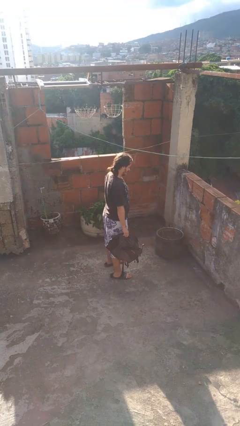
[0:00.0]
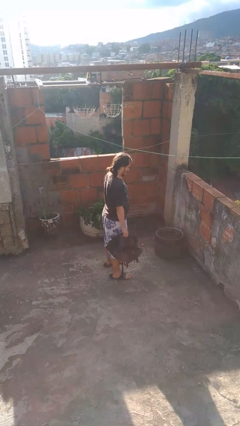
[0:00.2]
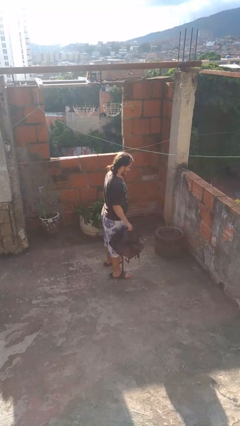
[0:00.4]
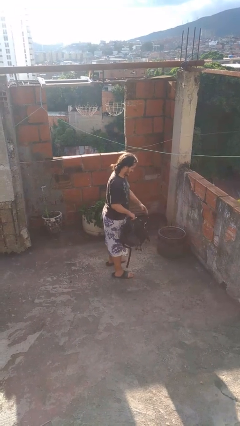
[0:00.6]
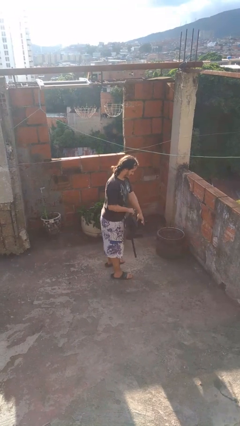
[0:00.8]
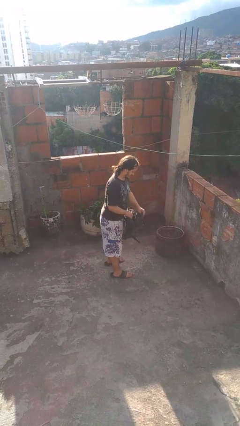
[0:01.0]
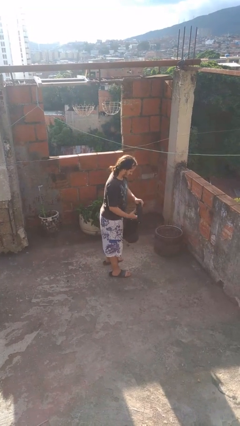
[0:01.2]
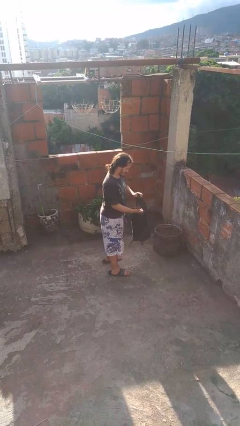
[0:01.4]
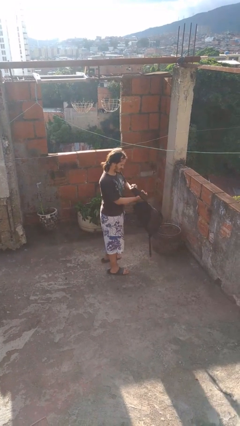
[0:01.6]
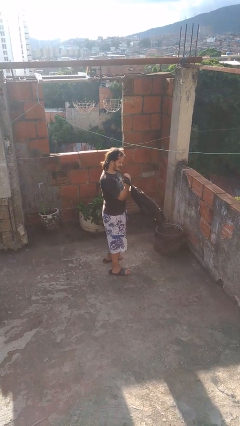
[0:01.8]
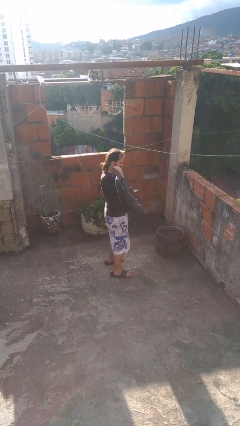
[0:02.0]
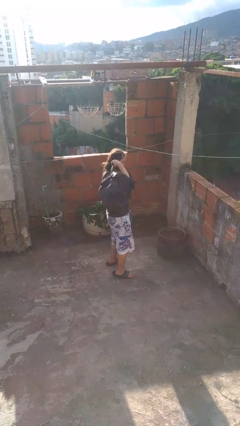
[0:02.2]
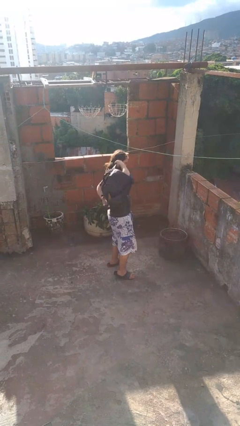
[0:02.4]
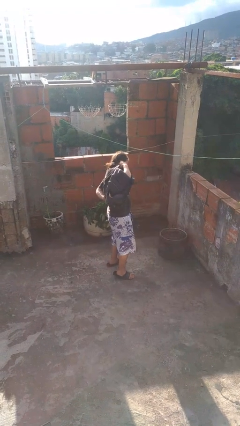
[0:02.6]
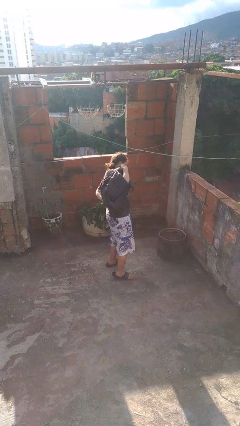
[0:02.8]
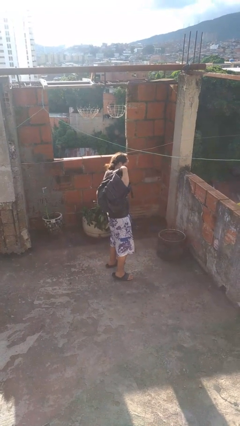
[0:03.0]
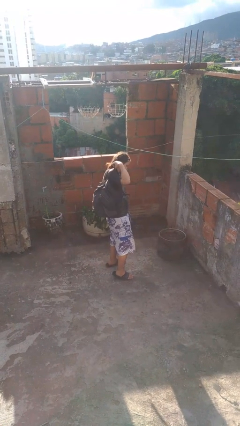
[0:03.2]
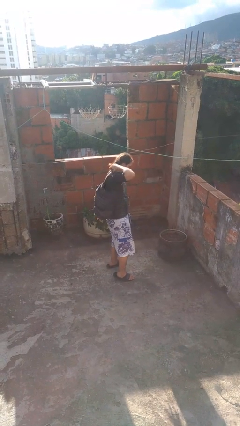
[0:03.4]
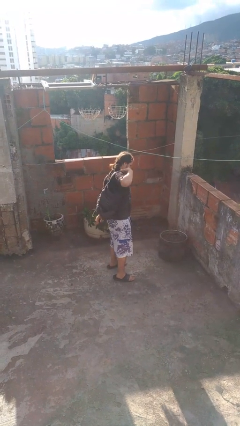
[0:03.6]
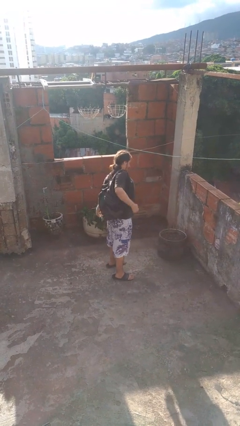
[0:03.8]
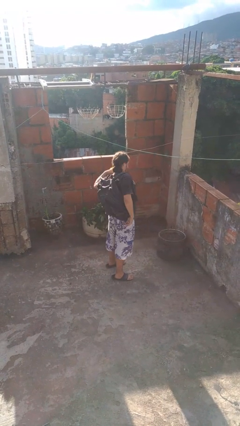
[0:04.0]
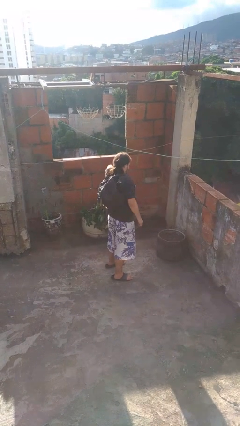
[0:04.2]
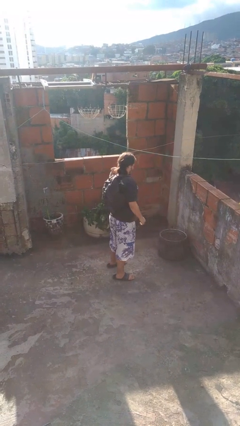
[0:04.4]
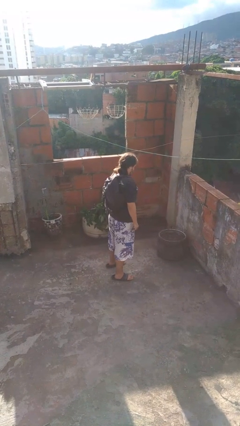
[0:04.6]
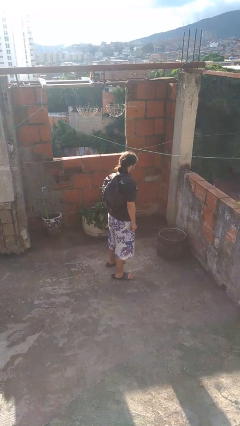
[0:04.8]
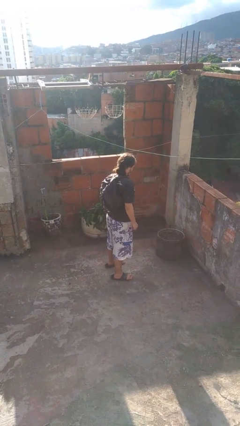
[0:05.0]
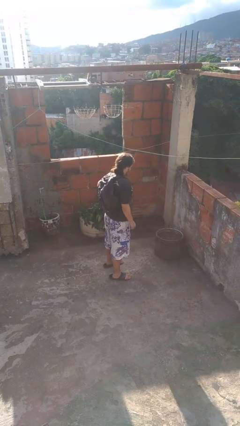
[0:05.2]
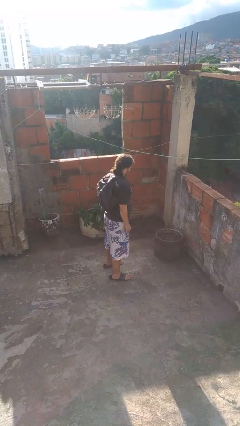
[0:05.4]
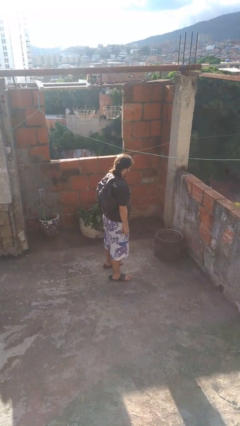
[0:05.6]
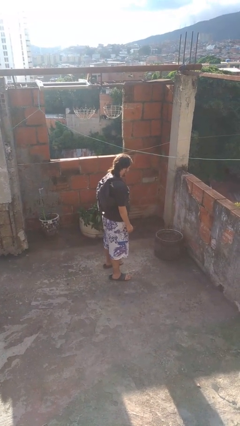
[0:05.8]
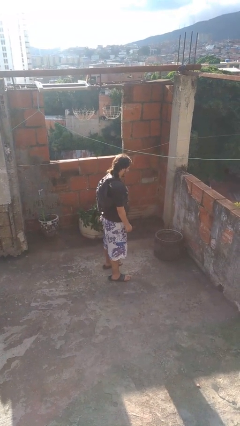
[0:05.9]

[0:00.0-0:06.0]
person puts on backpack

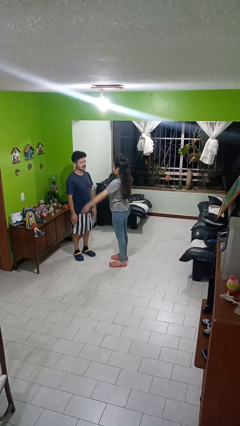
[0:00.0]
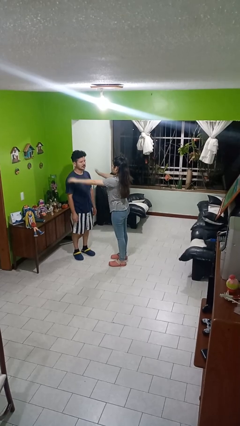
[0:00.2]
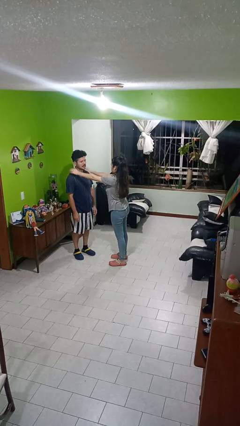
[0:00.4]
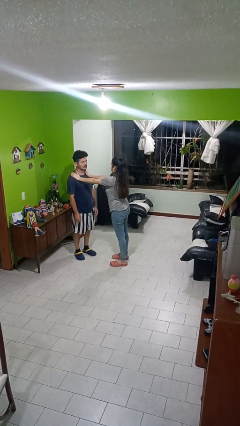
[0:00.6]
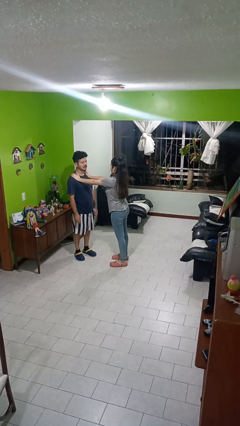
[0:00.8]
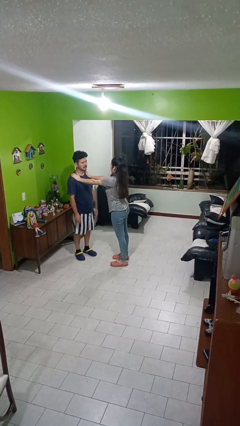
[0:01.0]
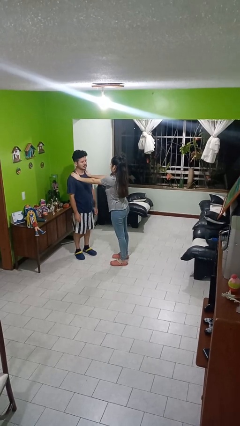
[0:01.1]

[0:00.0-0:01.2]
person grabs person by shoulder

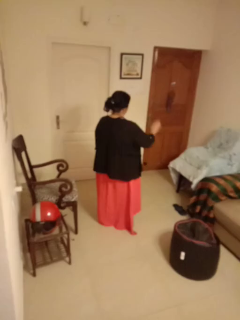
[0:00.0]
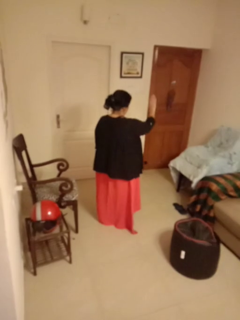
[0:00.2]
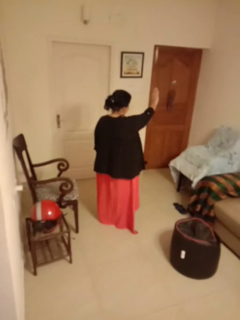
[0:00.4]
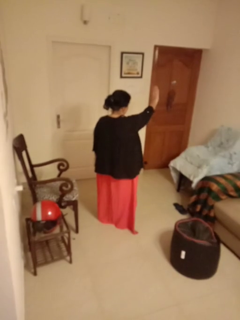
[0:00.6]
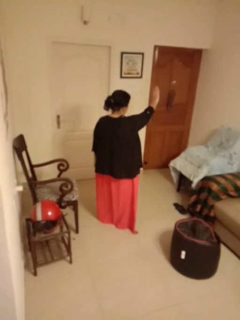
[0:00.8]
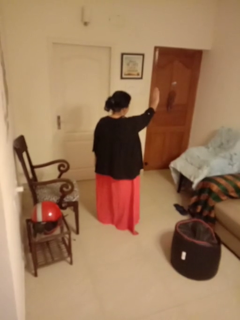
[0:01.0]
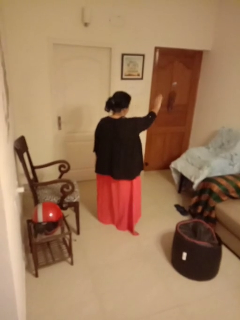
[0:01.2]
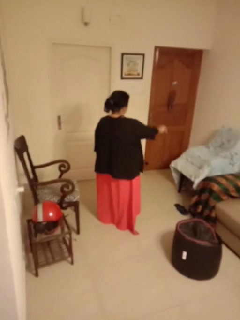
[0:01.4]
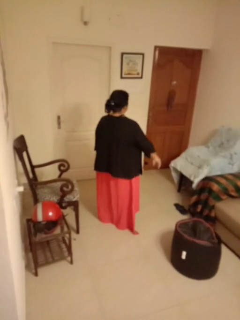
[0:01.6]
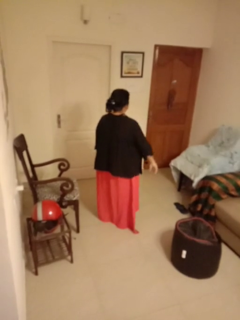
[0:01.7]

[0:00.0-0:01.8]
person gestures stop

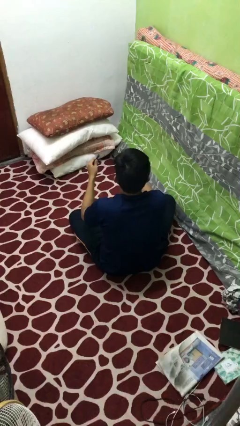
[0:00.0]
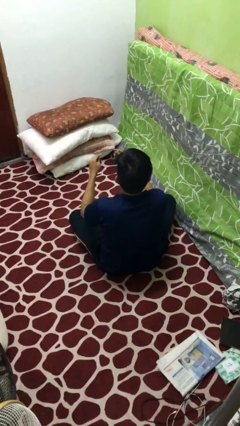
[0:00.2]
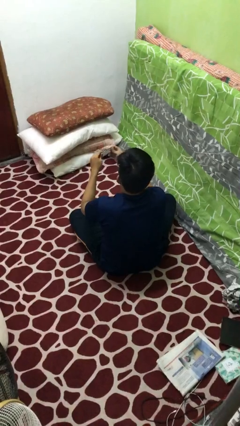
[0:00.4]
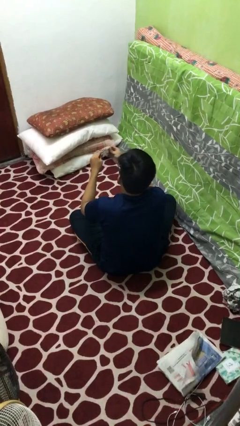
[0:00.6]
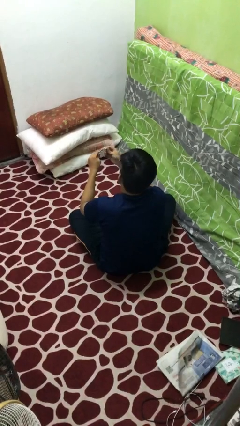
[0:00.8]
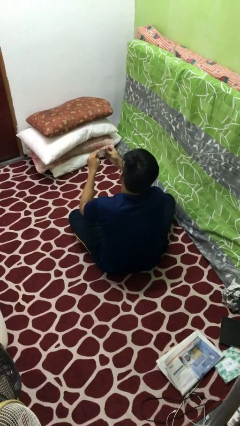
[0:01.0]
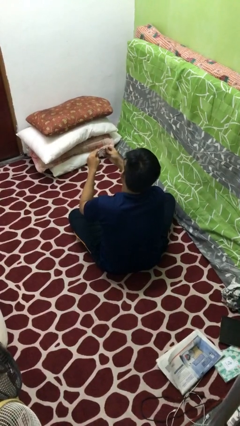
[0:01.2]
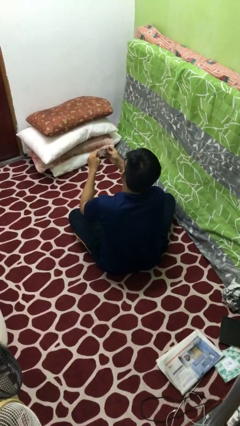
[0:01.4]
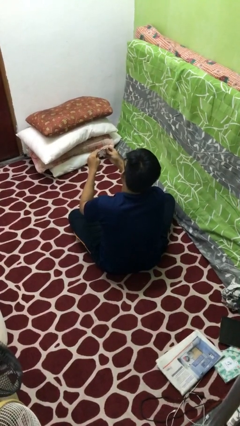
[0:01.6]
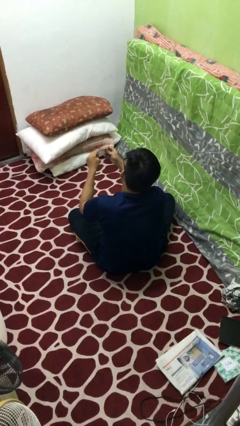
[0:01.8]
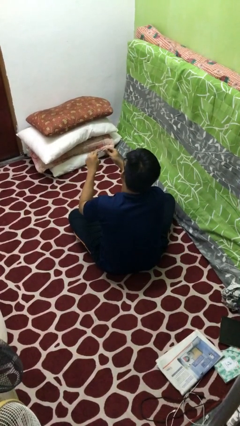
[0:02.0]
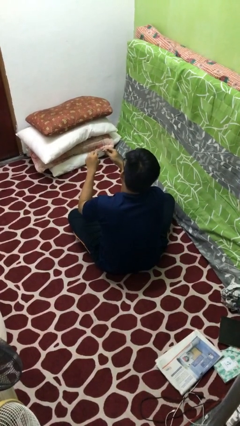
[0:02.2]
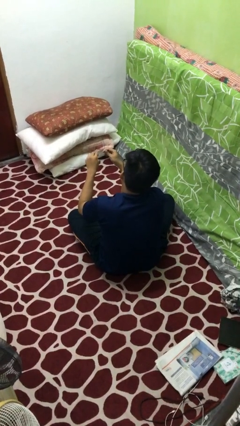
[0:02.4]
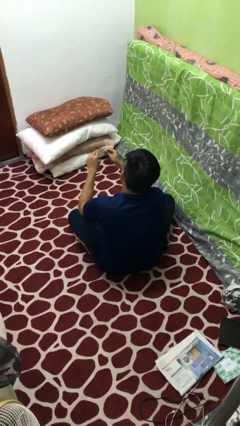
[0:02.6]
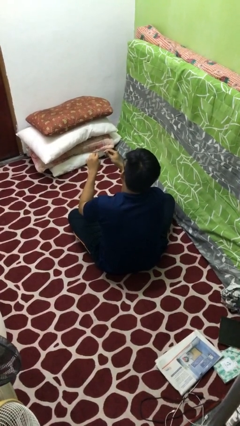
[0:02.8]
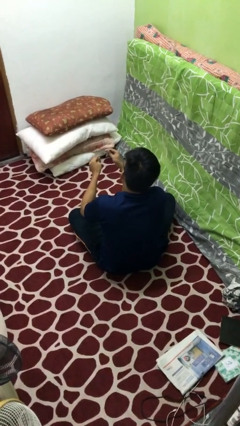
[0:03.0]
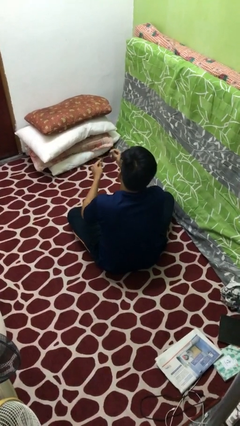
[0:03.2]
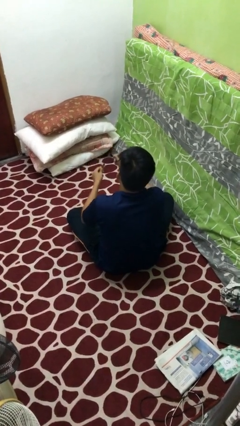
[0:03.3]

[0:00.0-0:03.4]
person clips fingernails

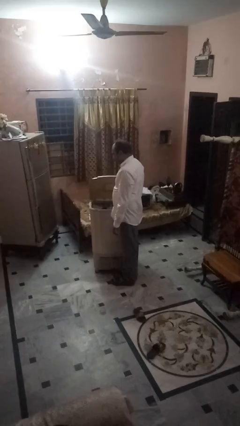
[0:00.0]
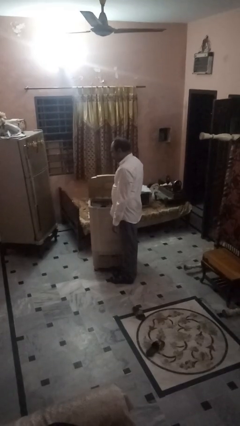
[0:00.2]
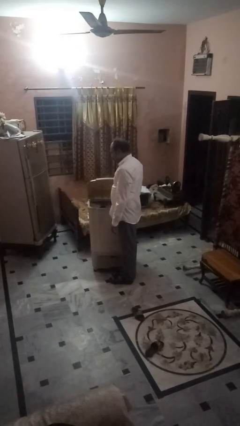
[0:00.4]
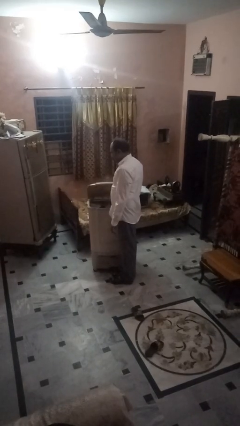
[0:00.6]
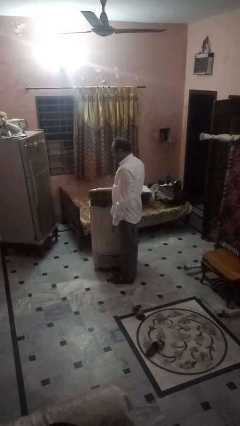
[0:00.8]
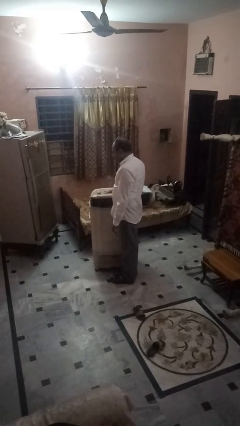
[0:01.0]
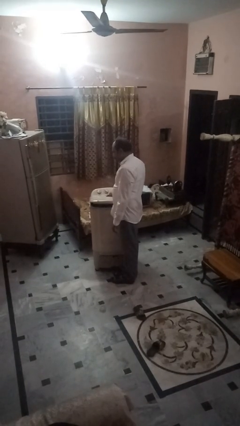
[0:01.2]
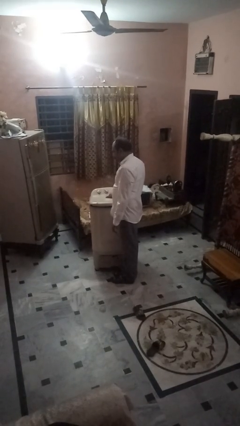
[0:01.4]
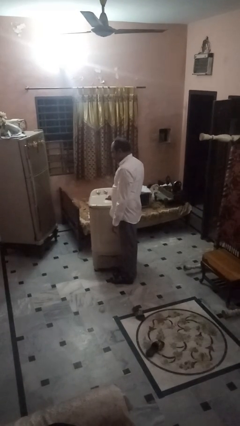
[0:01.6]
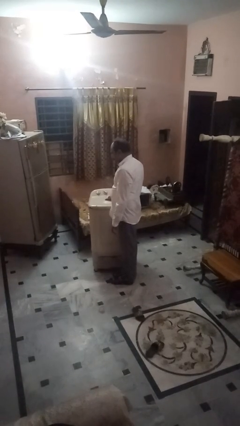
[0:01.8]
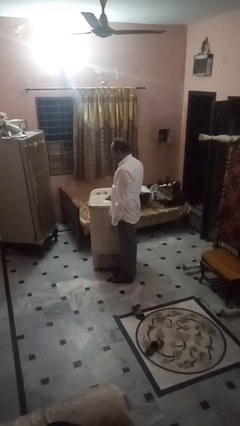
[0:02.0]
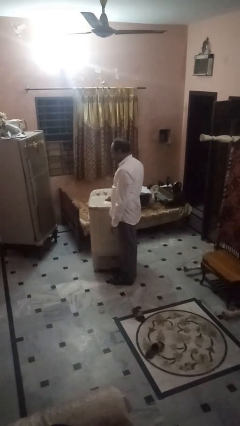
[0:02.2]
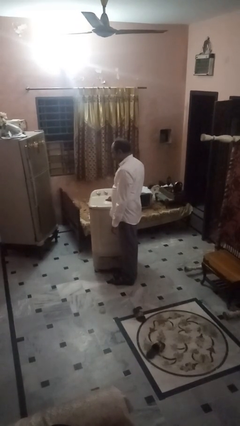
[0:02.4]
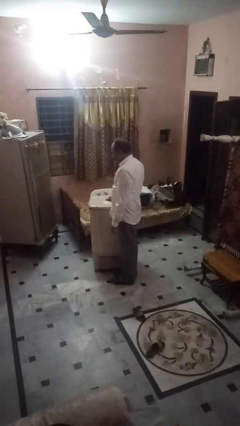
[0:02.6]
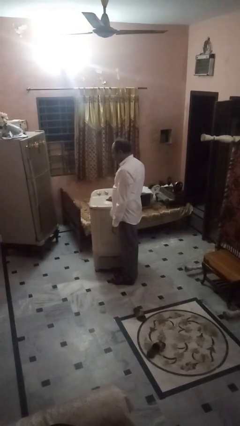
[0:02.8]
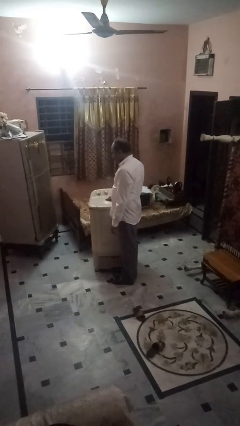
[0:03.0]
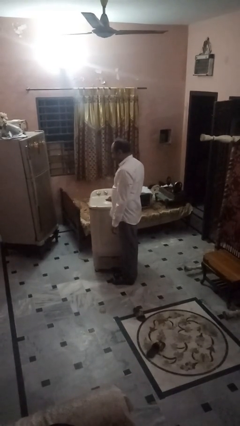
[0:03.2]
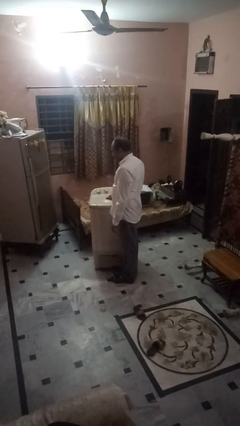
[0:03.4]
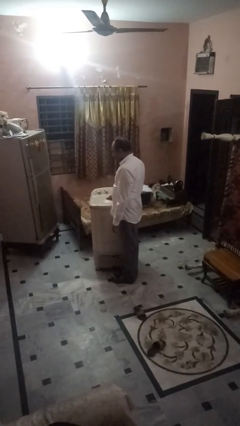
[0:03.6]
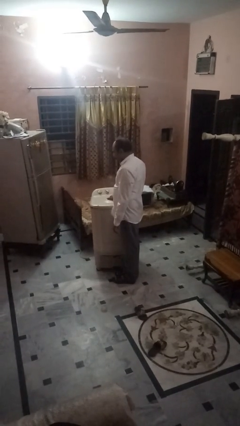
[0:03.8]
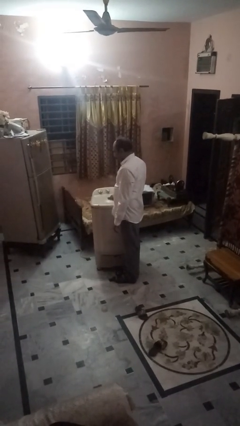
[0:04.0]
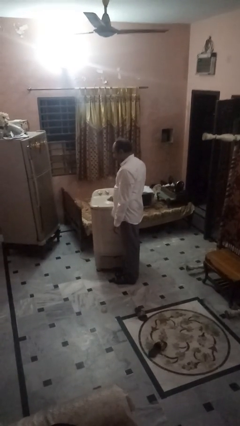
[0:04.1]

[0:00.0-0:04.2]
person closes clothes washer

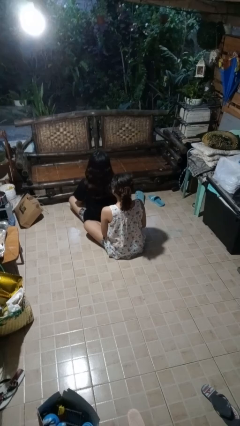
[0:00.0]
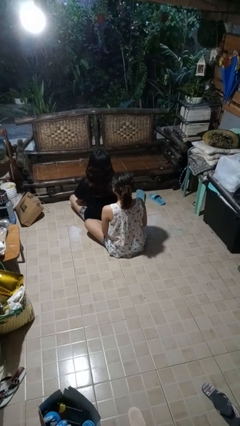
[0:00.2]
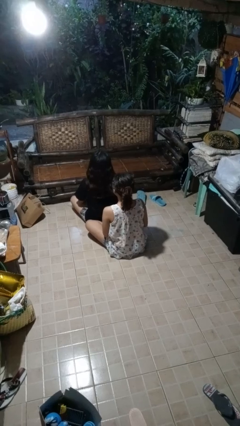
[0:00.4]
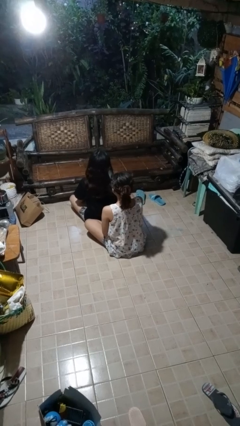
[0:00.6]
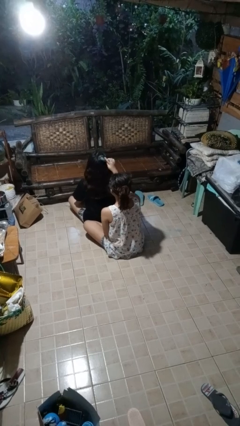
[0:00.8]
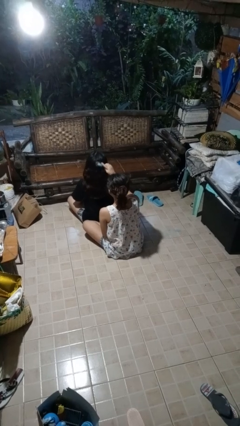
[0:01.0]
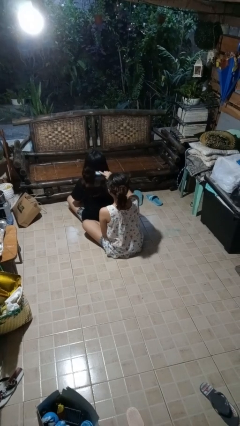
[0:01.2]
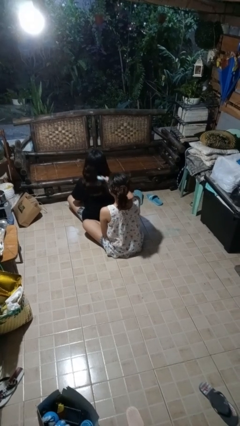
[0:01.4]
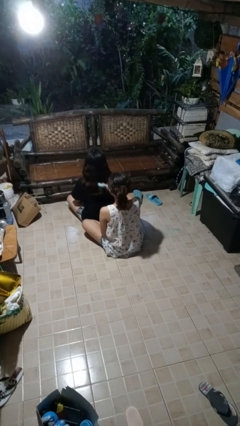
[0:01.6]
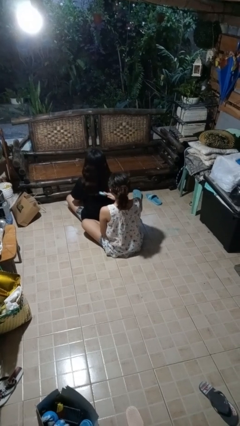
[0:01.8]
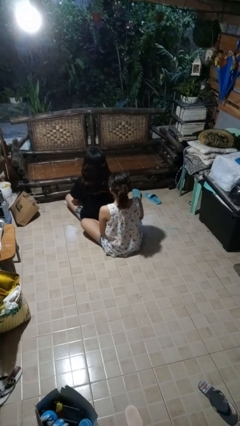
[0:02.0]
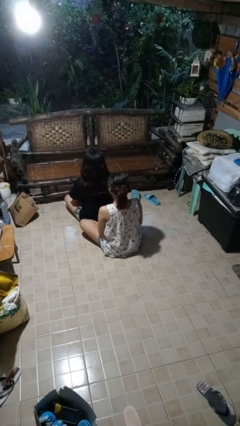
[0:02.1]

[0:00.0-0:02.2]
person brushes hair of person
